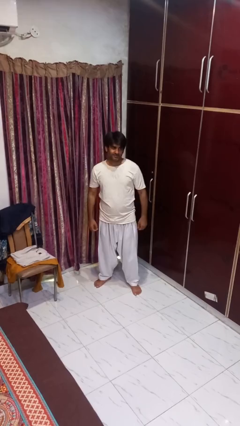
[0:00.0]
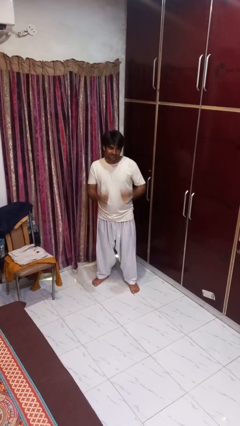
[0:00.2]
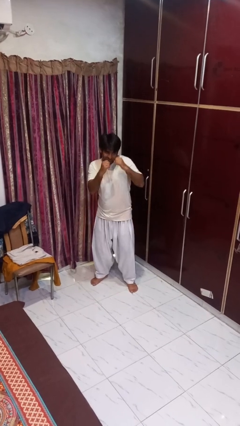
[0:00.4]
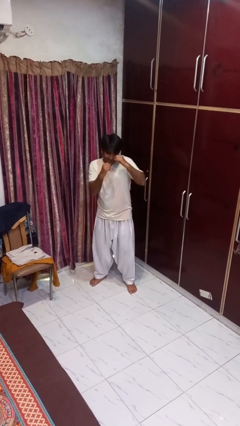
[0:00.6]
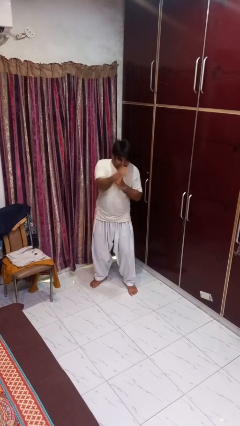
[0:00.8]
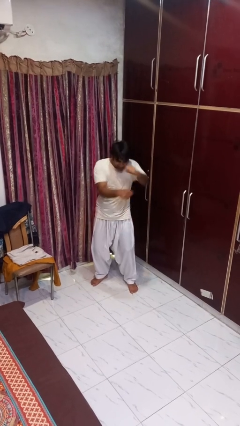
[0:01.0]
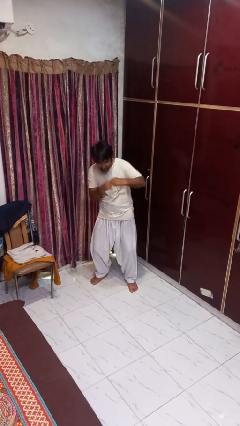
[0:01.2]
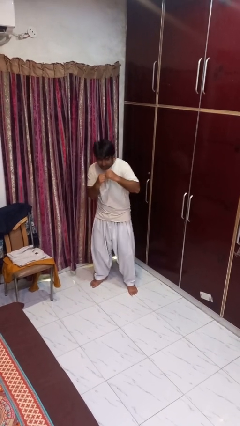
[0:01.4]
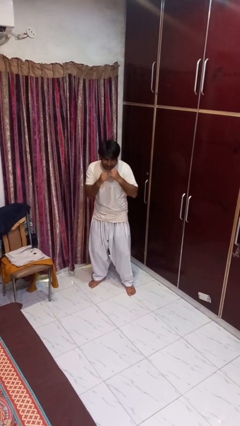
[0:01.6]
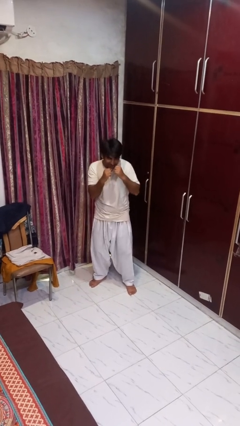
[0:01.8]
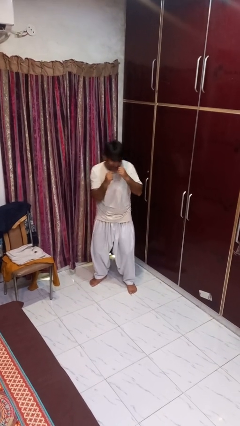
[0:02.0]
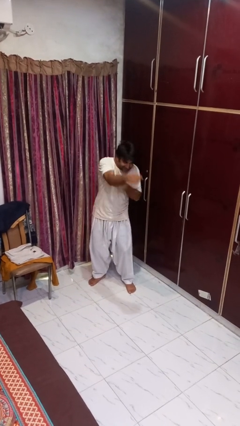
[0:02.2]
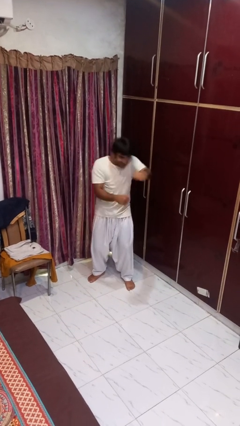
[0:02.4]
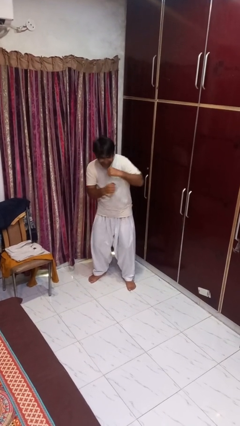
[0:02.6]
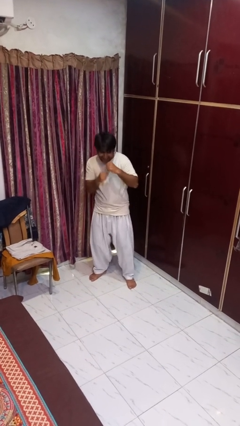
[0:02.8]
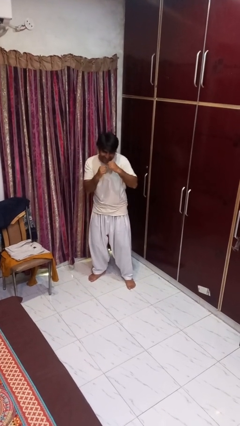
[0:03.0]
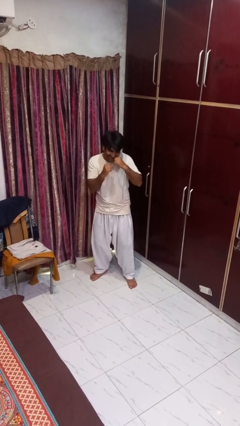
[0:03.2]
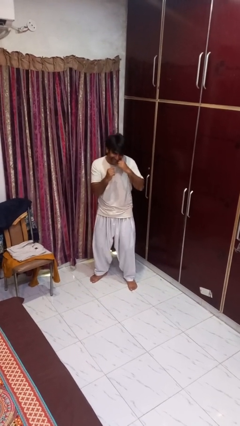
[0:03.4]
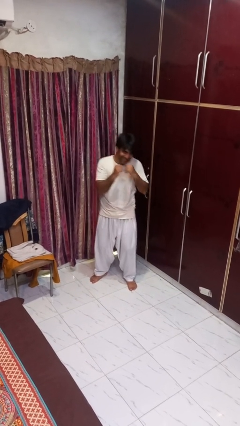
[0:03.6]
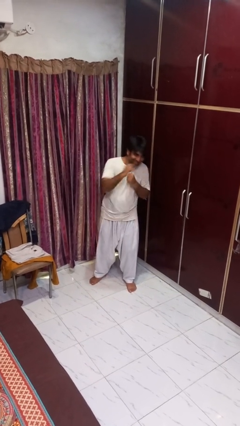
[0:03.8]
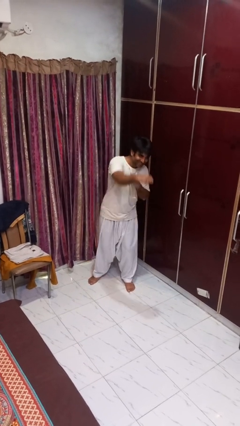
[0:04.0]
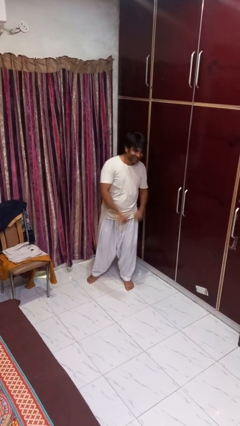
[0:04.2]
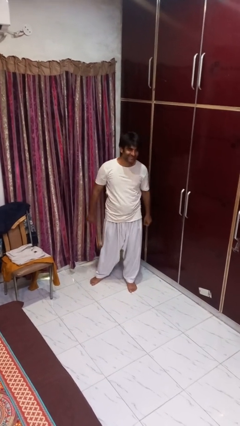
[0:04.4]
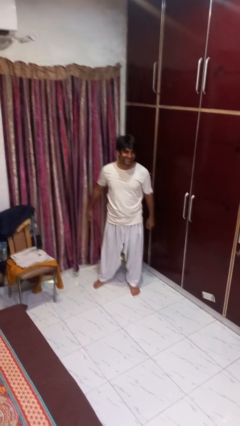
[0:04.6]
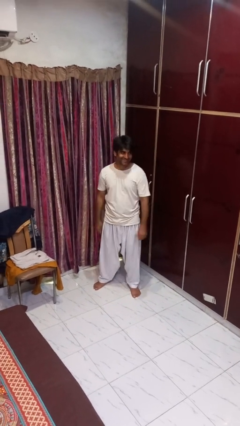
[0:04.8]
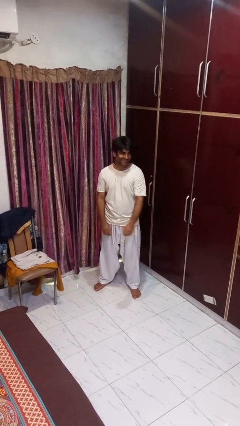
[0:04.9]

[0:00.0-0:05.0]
person punches

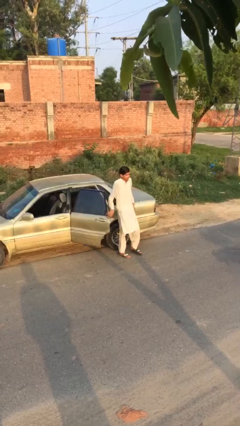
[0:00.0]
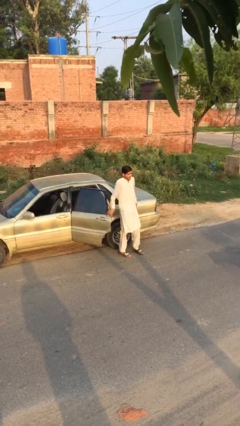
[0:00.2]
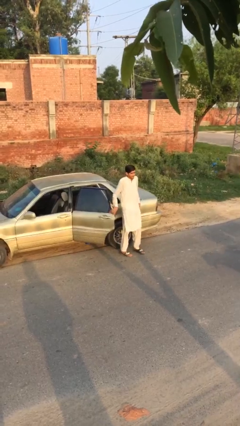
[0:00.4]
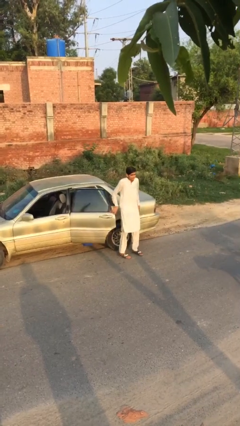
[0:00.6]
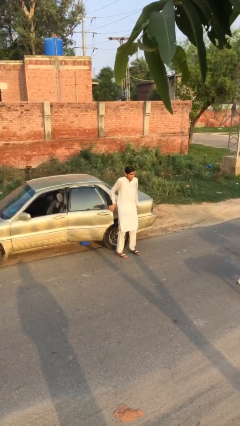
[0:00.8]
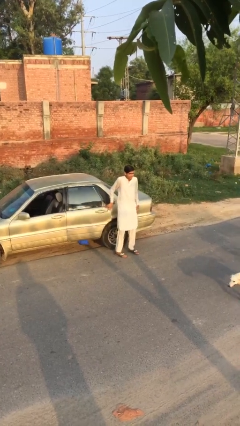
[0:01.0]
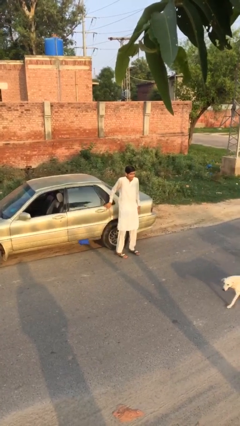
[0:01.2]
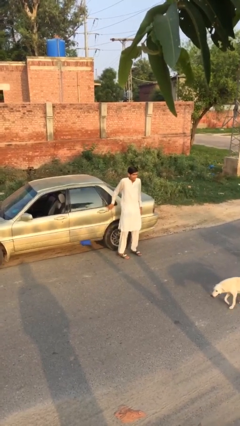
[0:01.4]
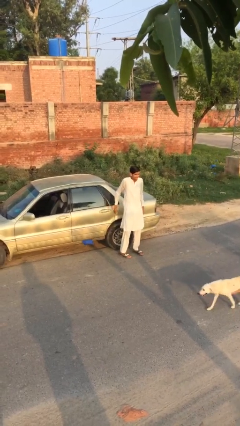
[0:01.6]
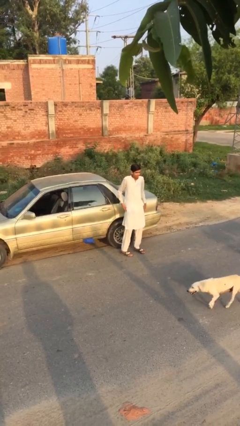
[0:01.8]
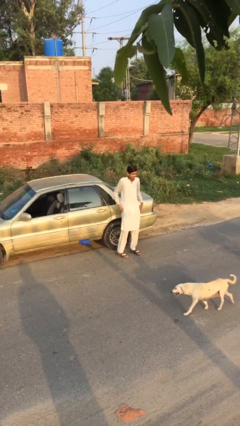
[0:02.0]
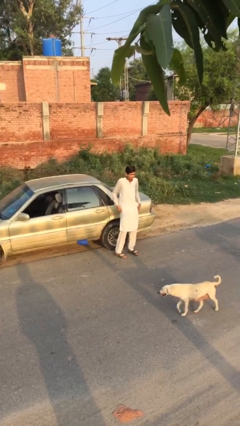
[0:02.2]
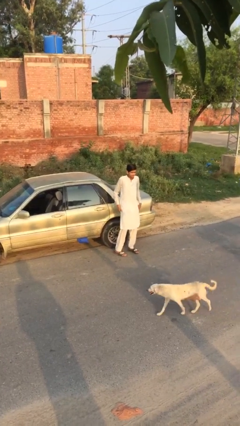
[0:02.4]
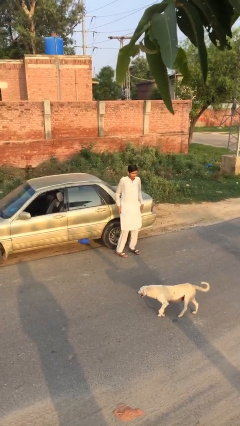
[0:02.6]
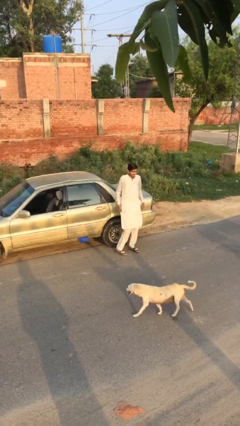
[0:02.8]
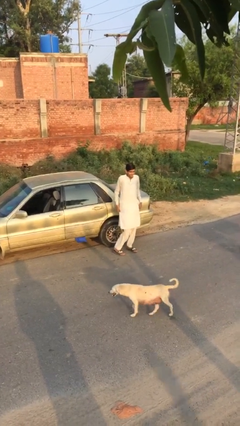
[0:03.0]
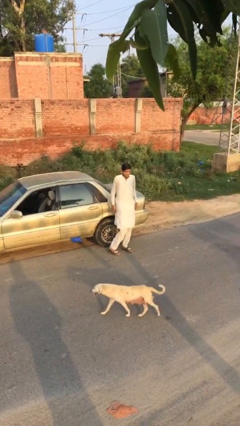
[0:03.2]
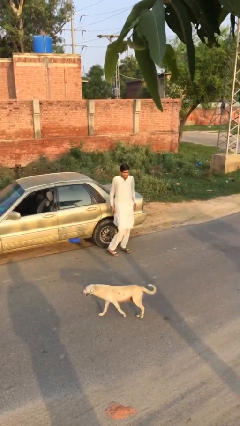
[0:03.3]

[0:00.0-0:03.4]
person closes car door

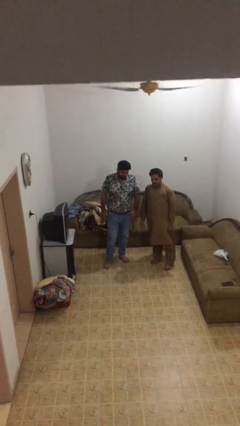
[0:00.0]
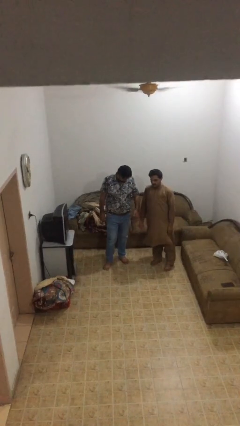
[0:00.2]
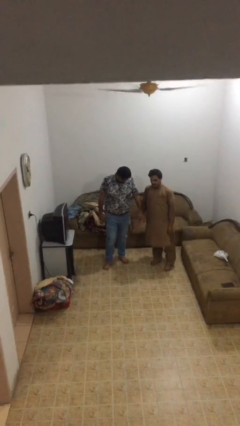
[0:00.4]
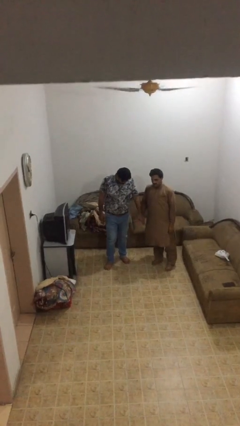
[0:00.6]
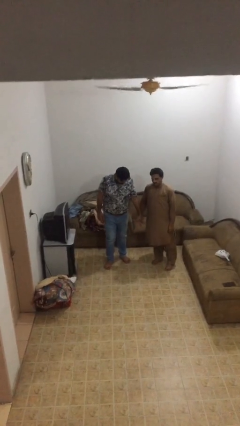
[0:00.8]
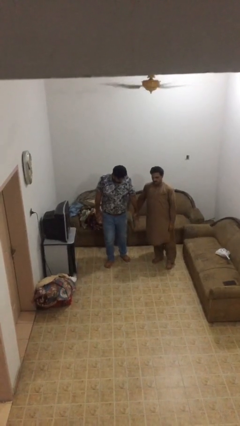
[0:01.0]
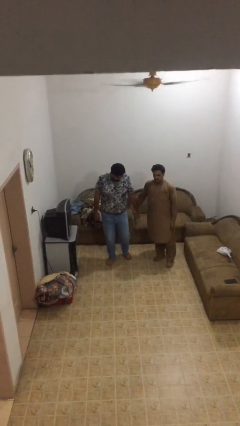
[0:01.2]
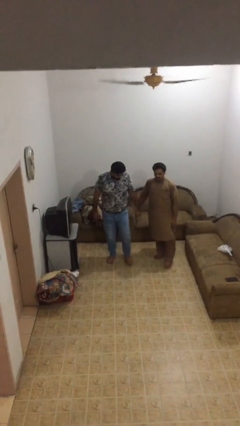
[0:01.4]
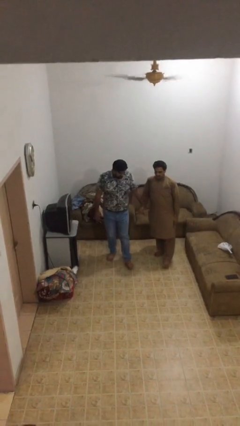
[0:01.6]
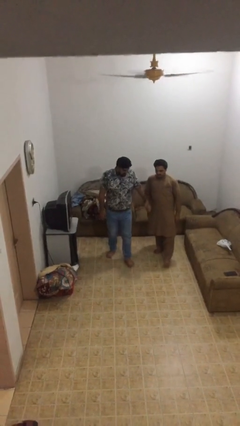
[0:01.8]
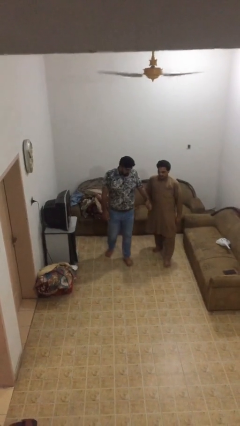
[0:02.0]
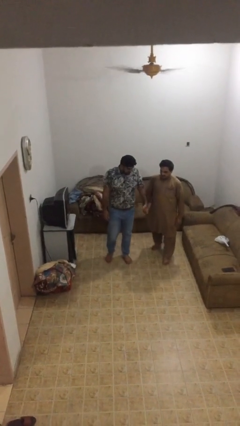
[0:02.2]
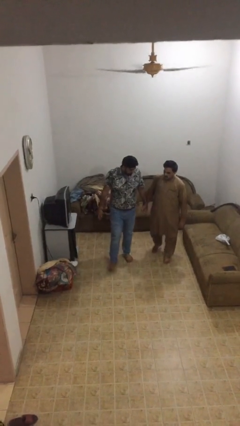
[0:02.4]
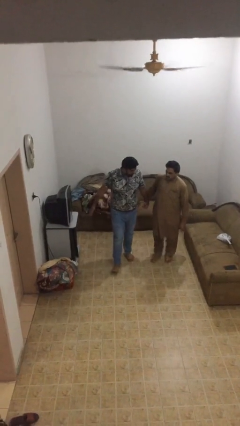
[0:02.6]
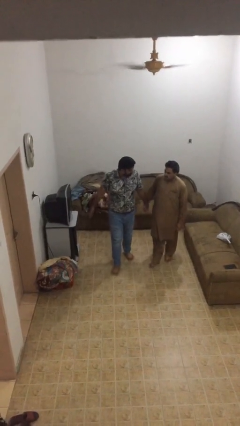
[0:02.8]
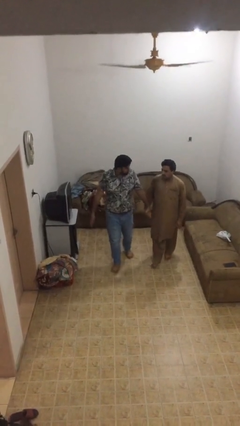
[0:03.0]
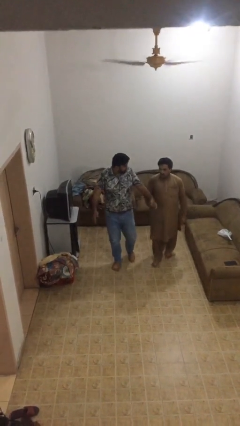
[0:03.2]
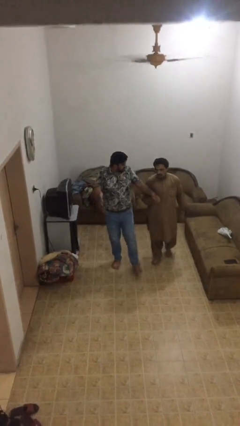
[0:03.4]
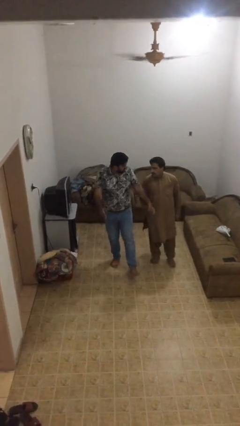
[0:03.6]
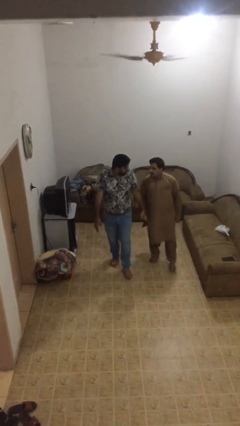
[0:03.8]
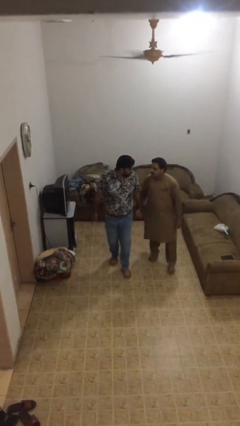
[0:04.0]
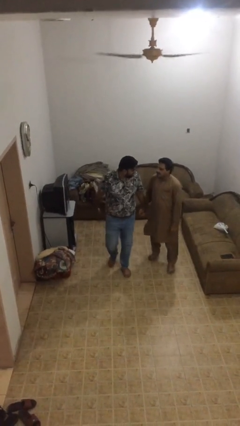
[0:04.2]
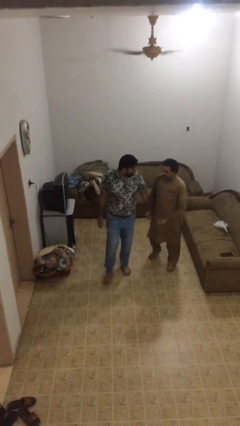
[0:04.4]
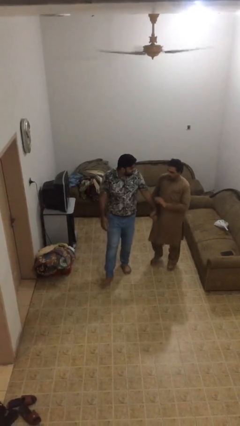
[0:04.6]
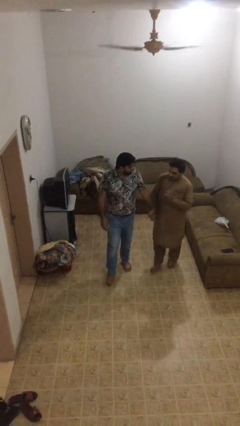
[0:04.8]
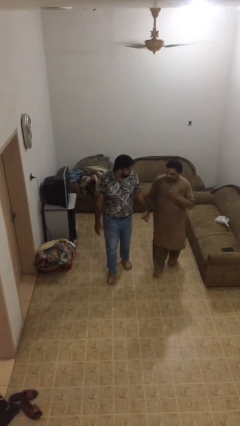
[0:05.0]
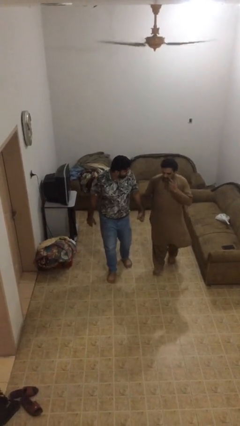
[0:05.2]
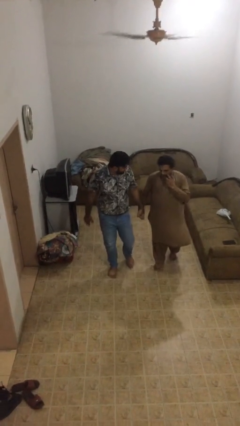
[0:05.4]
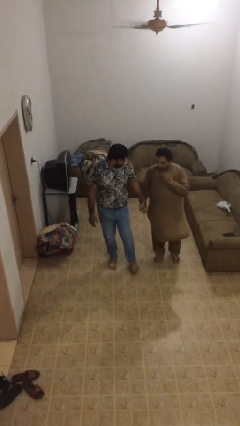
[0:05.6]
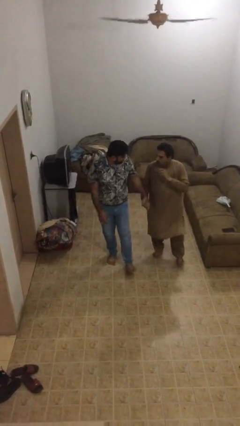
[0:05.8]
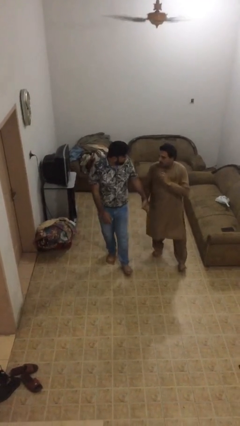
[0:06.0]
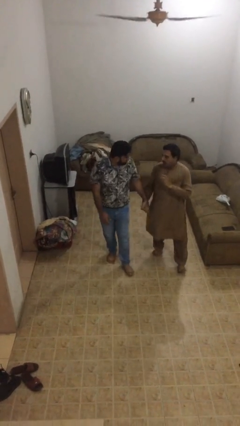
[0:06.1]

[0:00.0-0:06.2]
person holds hand

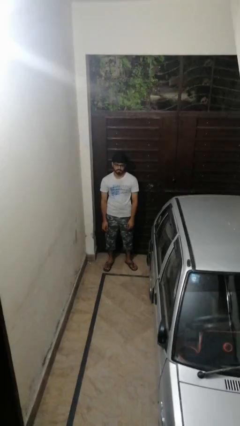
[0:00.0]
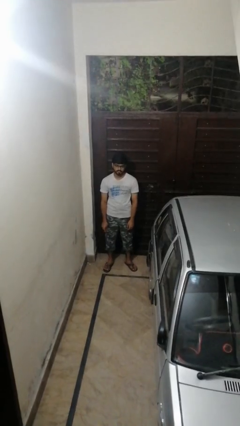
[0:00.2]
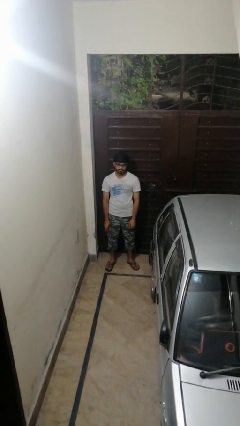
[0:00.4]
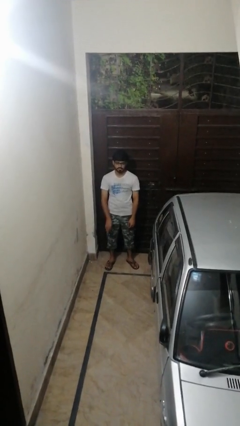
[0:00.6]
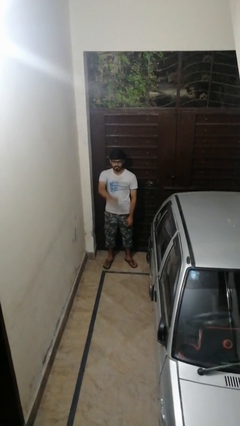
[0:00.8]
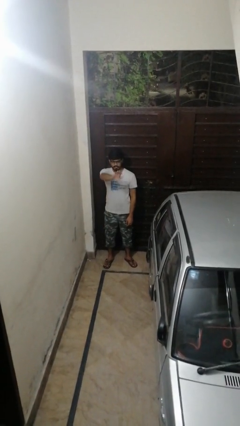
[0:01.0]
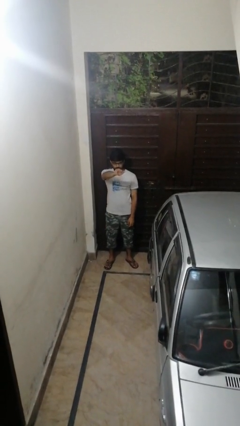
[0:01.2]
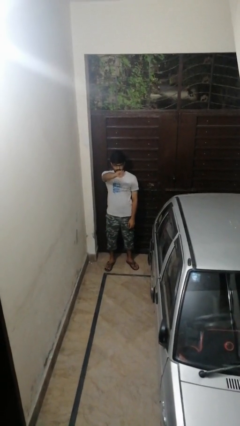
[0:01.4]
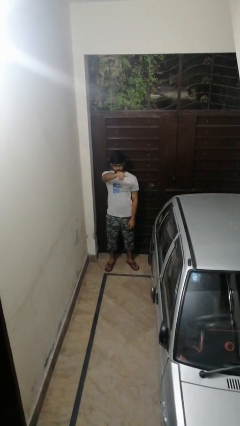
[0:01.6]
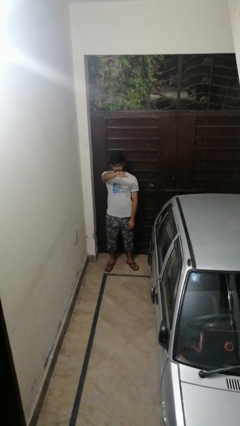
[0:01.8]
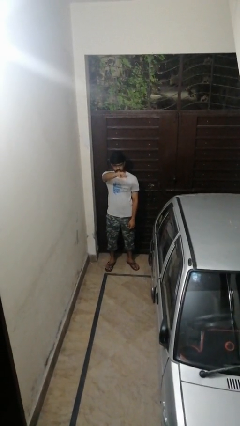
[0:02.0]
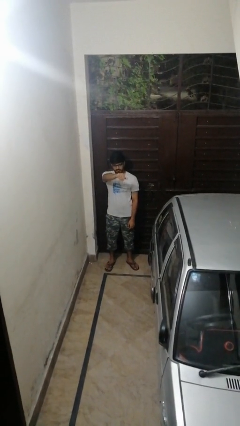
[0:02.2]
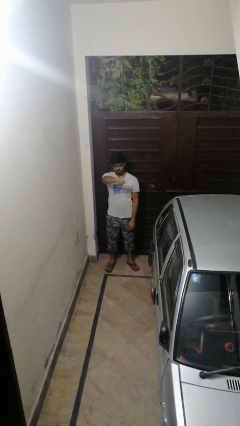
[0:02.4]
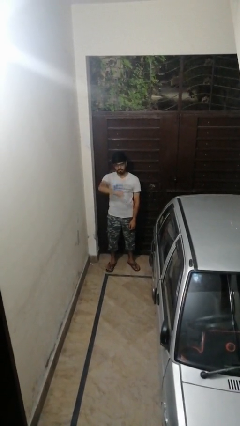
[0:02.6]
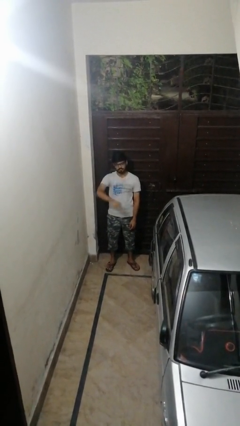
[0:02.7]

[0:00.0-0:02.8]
person gestures come here

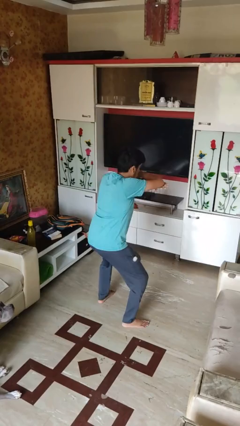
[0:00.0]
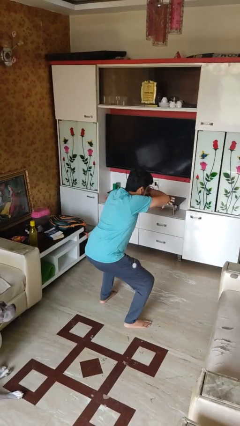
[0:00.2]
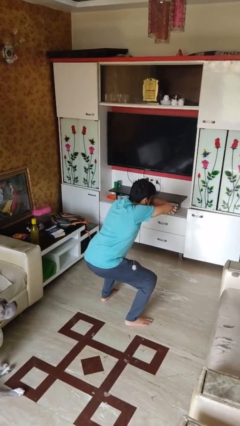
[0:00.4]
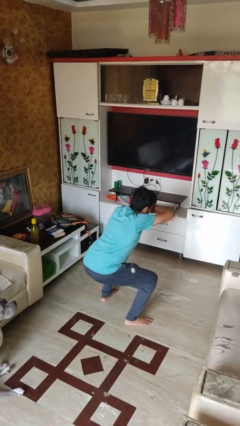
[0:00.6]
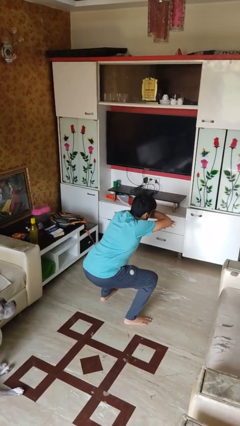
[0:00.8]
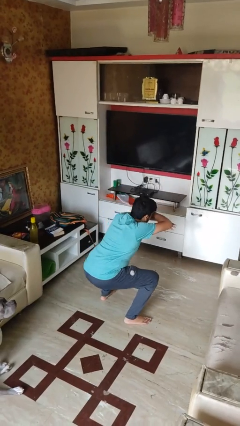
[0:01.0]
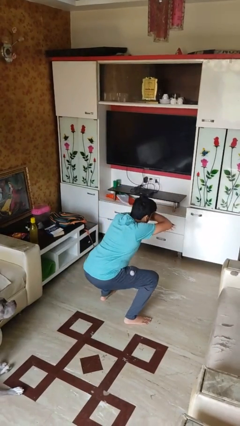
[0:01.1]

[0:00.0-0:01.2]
person squats
